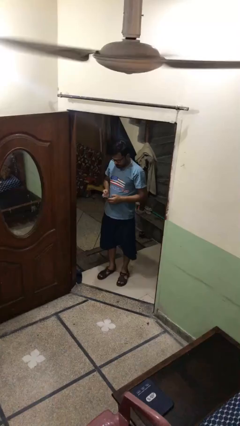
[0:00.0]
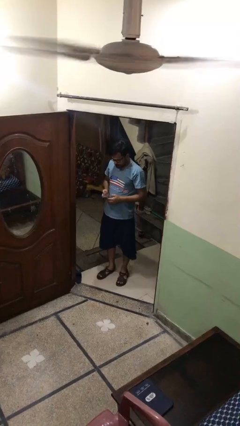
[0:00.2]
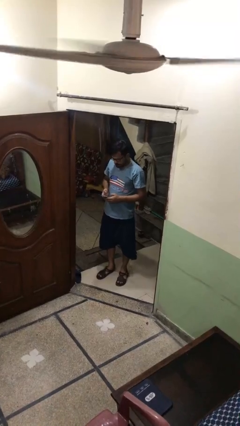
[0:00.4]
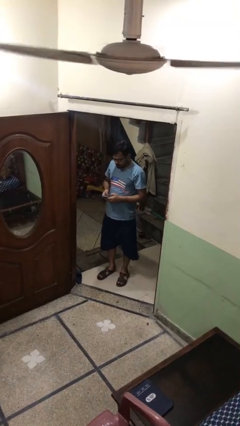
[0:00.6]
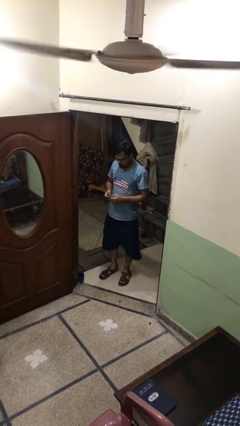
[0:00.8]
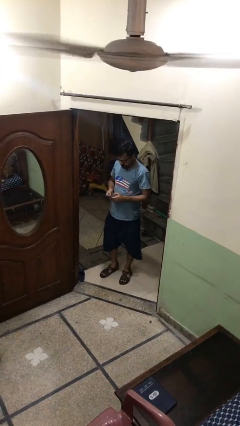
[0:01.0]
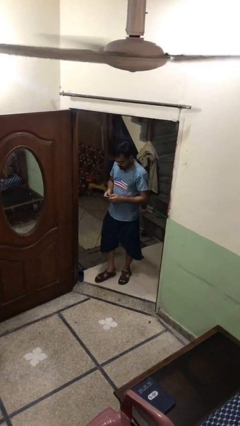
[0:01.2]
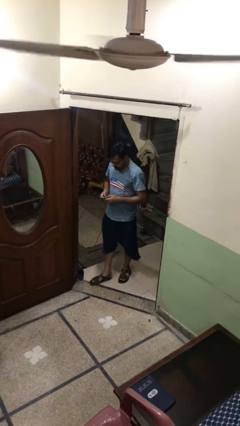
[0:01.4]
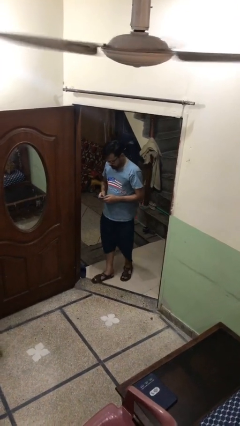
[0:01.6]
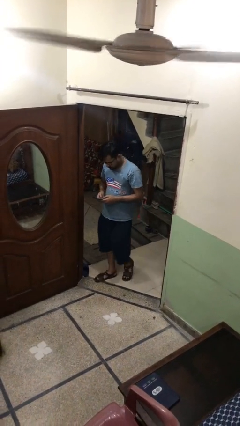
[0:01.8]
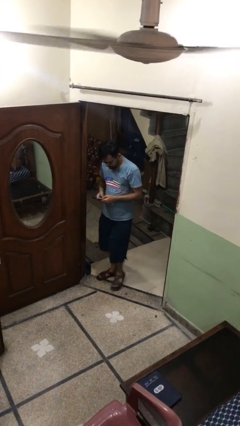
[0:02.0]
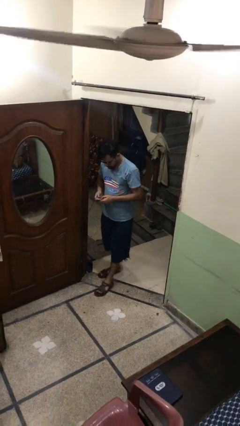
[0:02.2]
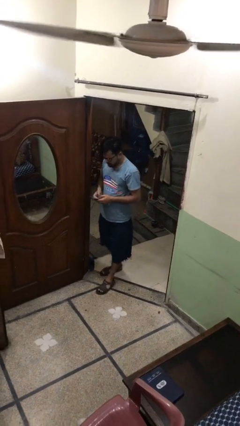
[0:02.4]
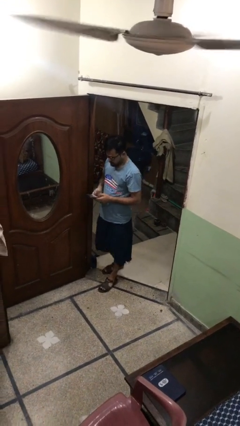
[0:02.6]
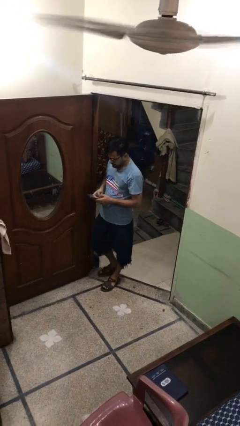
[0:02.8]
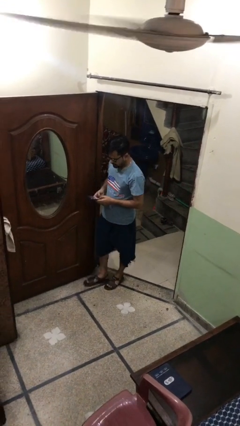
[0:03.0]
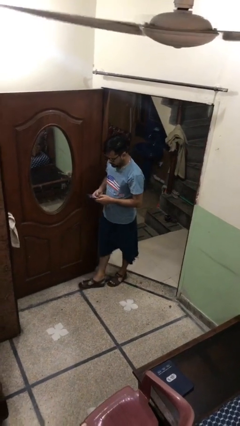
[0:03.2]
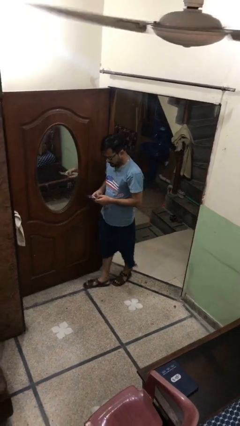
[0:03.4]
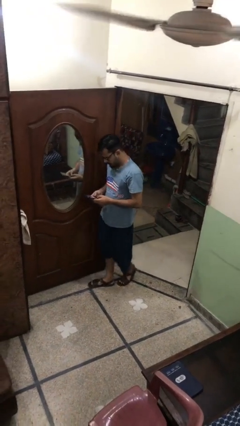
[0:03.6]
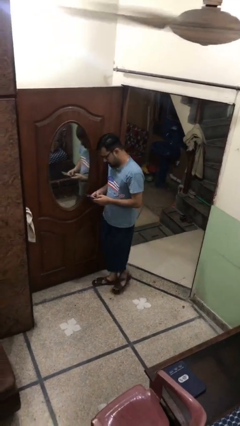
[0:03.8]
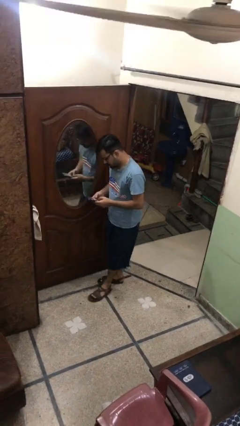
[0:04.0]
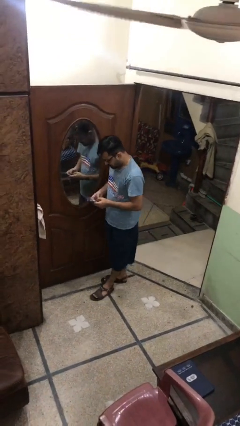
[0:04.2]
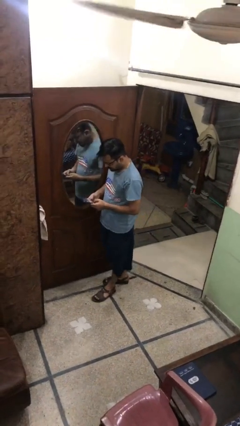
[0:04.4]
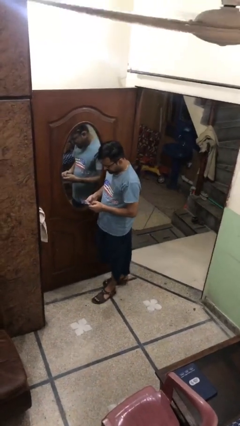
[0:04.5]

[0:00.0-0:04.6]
person texts on phone

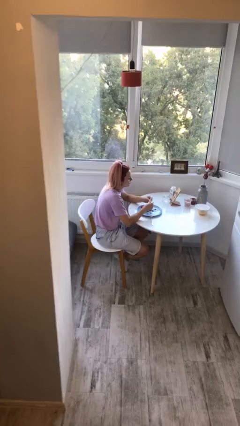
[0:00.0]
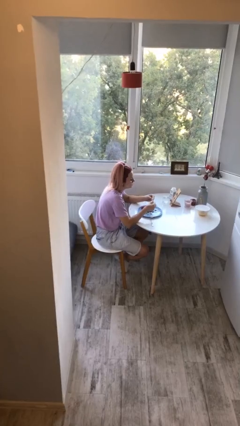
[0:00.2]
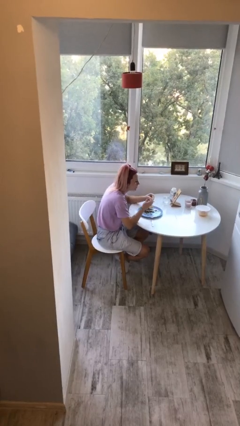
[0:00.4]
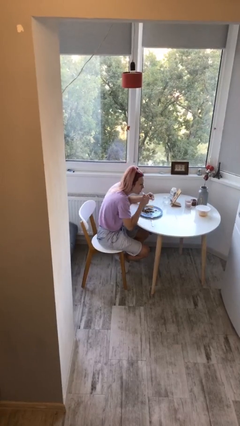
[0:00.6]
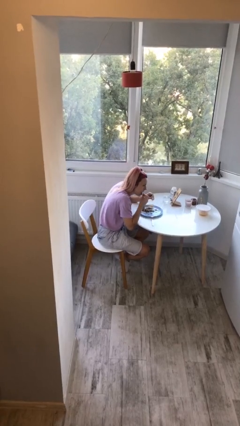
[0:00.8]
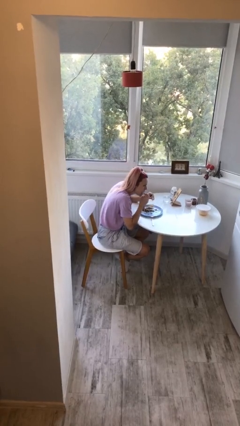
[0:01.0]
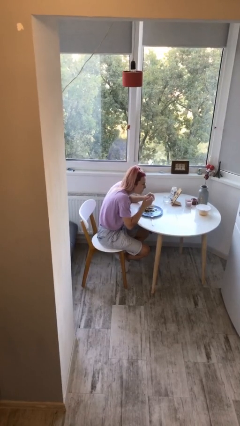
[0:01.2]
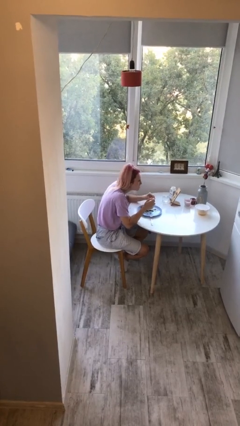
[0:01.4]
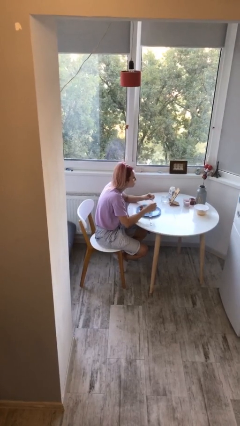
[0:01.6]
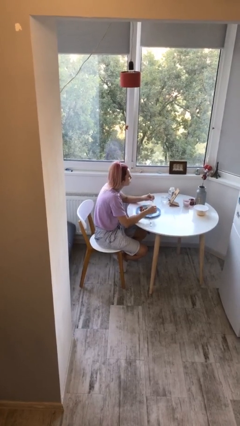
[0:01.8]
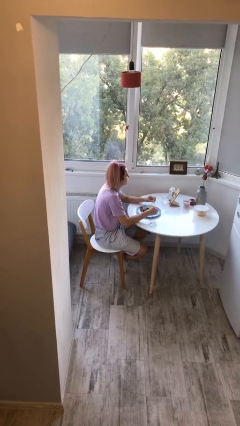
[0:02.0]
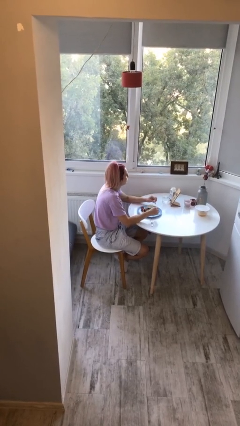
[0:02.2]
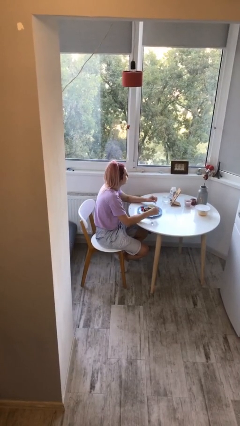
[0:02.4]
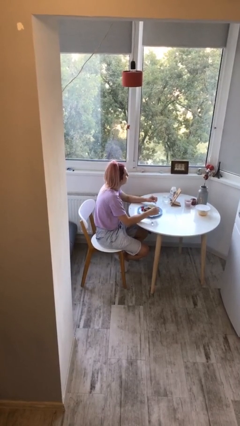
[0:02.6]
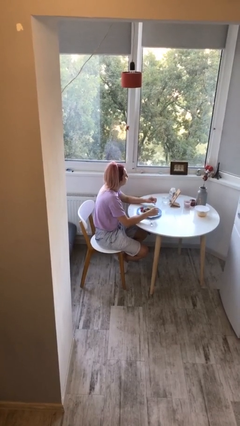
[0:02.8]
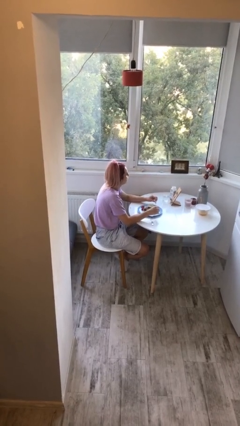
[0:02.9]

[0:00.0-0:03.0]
person eats with hands

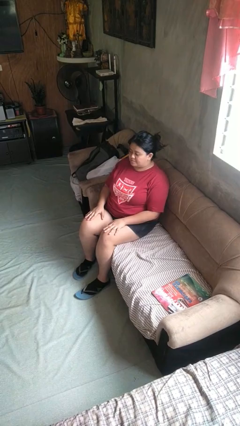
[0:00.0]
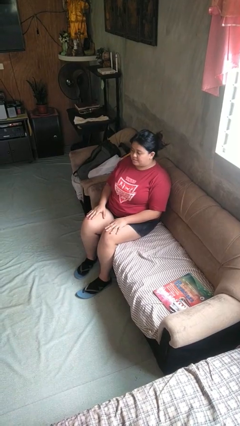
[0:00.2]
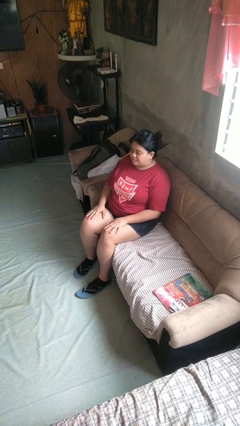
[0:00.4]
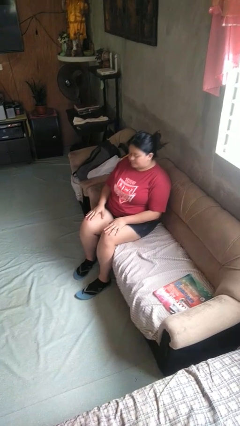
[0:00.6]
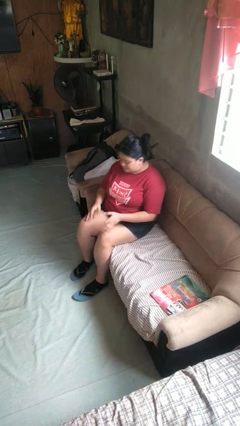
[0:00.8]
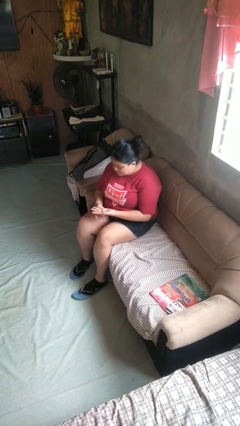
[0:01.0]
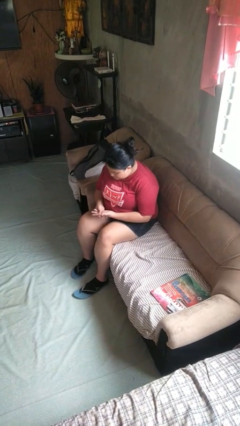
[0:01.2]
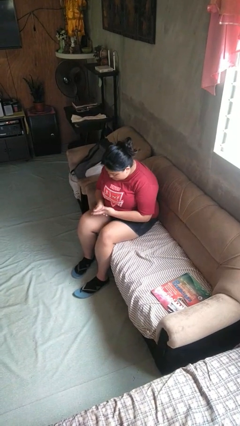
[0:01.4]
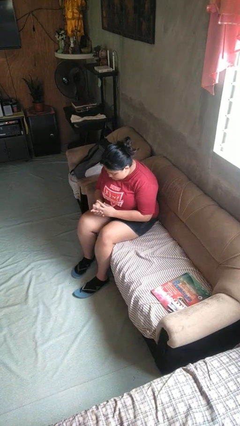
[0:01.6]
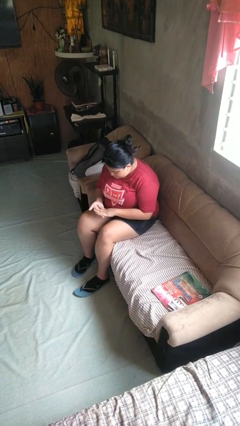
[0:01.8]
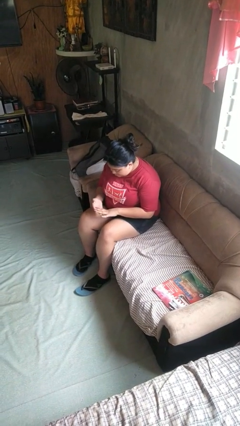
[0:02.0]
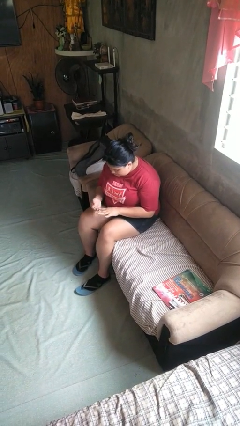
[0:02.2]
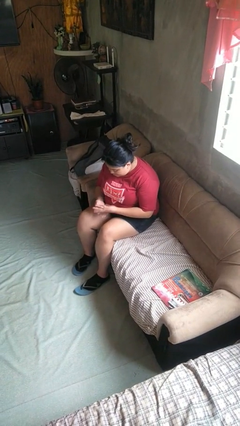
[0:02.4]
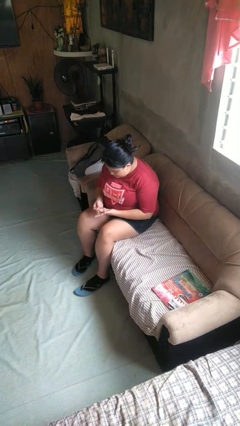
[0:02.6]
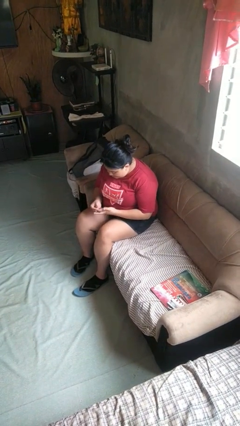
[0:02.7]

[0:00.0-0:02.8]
person looks at hands in lap

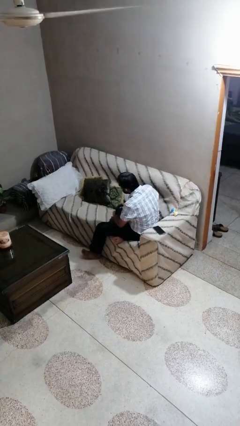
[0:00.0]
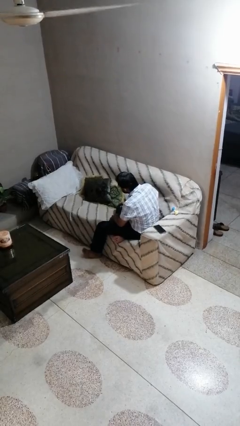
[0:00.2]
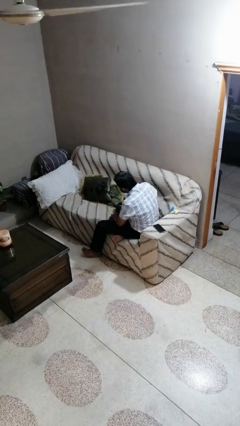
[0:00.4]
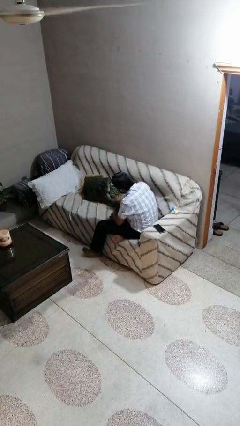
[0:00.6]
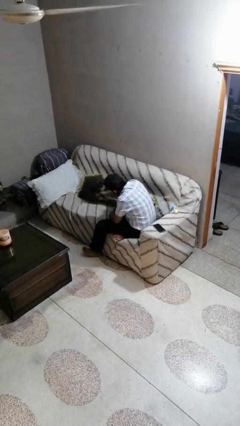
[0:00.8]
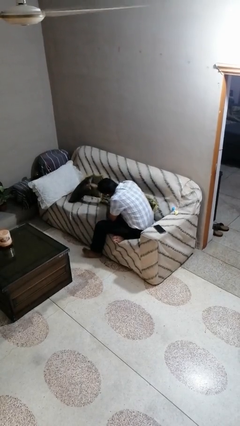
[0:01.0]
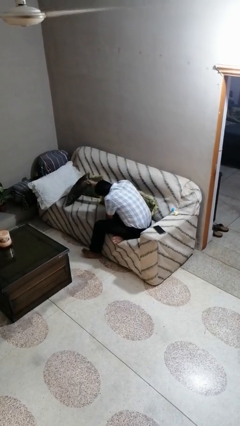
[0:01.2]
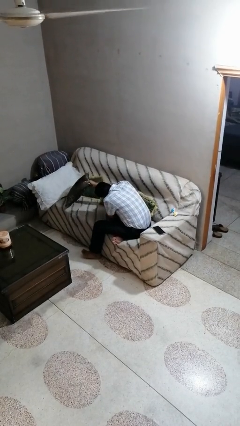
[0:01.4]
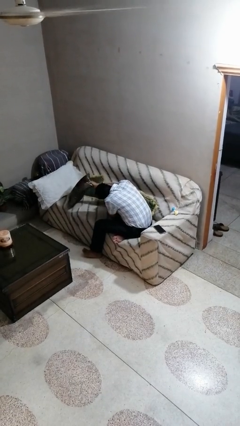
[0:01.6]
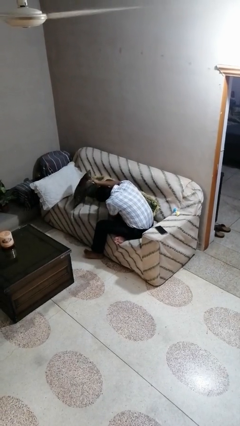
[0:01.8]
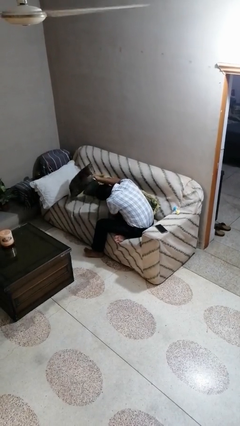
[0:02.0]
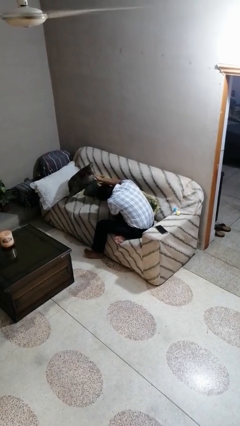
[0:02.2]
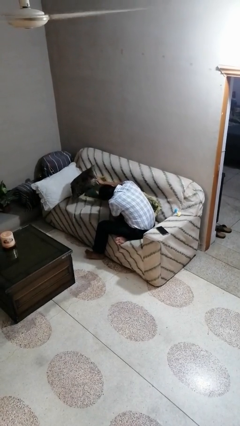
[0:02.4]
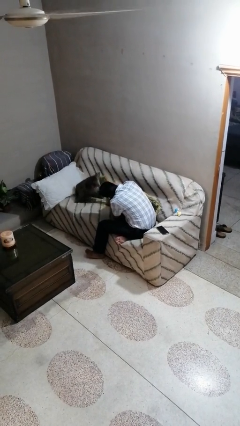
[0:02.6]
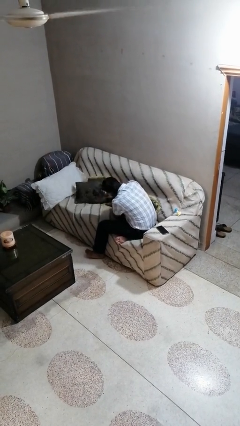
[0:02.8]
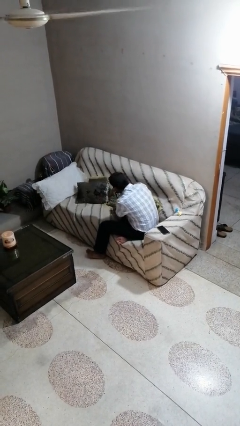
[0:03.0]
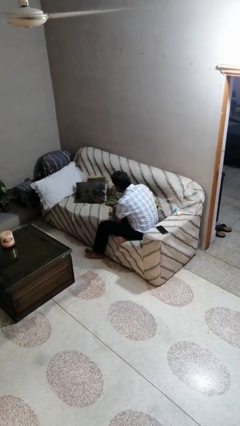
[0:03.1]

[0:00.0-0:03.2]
person searches in couch

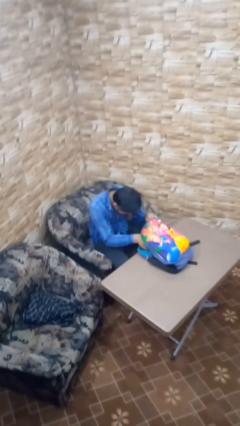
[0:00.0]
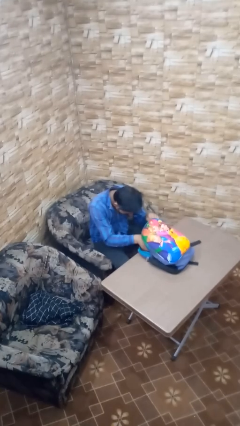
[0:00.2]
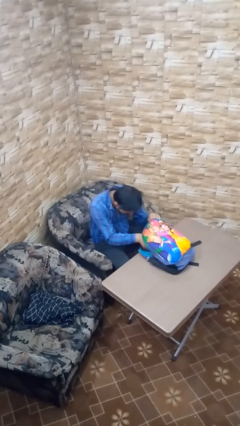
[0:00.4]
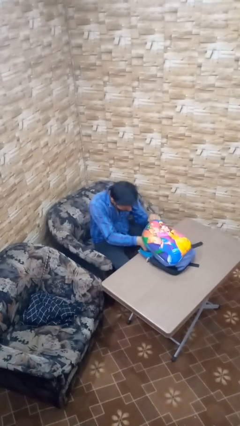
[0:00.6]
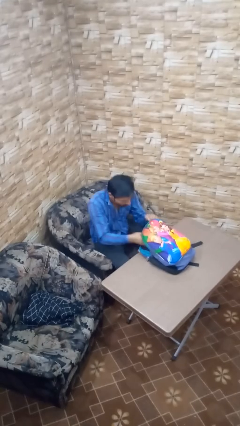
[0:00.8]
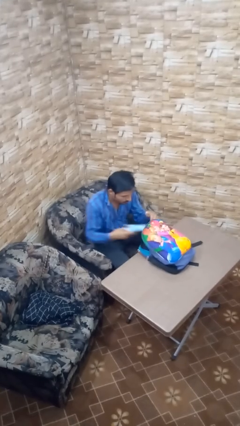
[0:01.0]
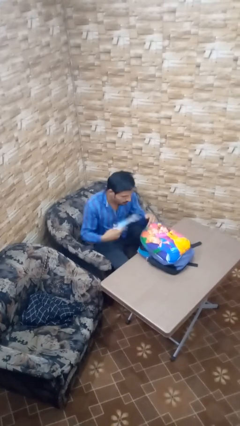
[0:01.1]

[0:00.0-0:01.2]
person takes object from backpack

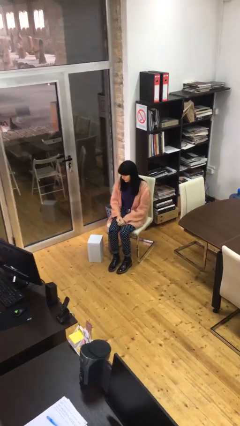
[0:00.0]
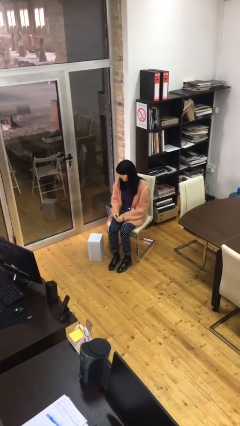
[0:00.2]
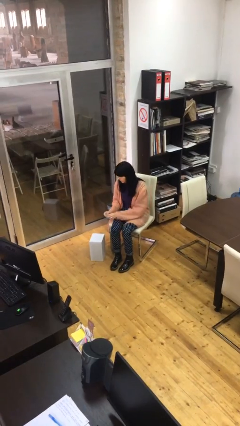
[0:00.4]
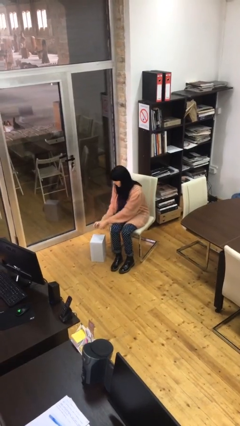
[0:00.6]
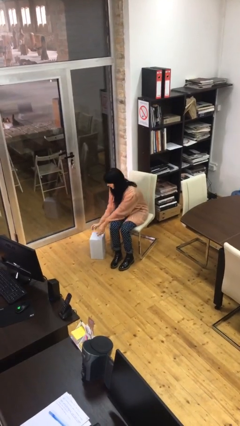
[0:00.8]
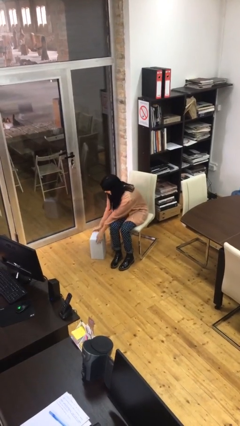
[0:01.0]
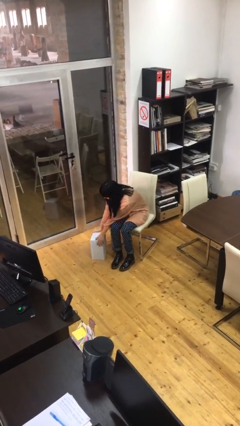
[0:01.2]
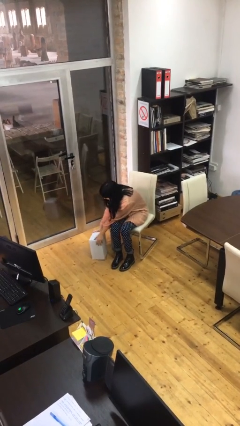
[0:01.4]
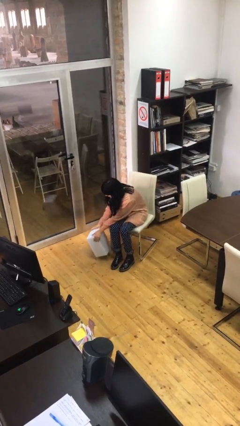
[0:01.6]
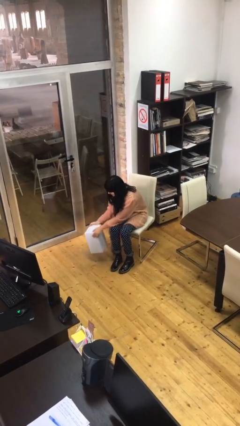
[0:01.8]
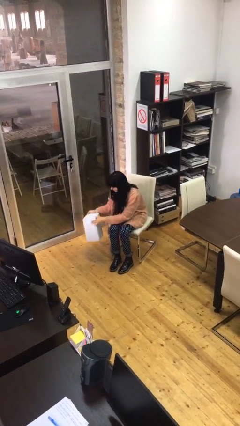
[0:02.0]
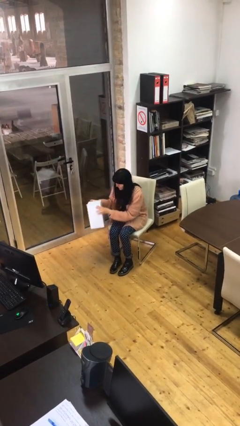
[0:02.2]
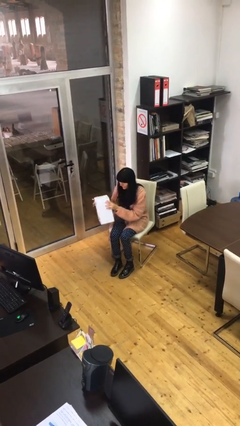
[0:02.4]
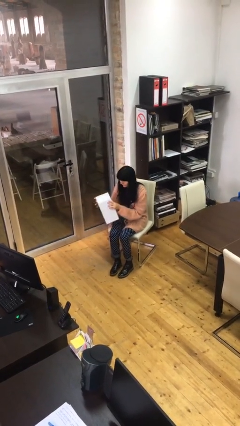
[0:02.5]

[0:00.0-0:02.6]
person picks up object from floor
